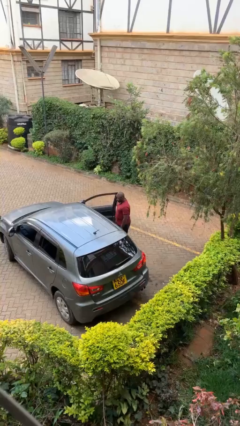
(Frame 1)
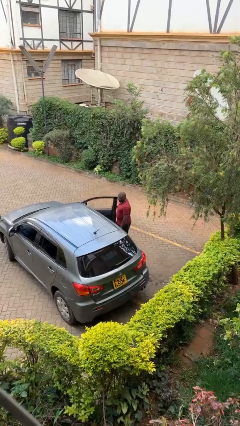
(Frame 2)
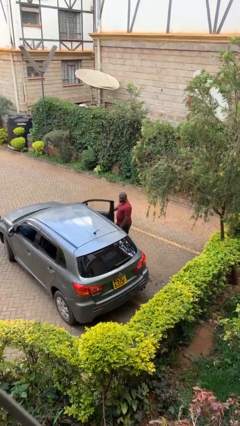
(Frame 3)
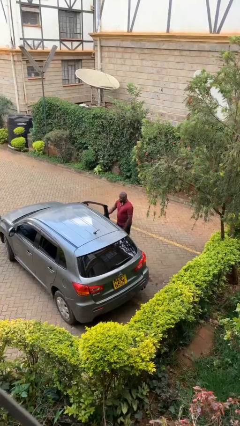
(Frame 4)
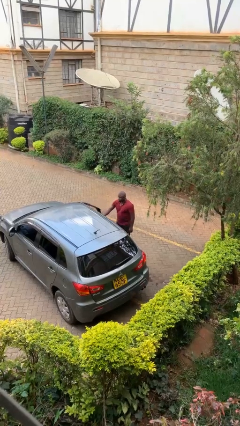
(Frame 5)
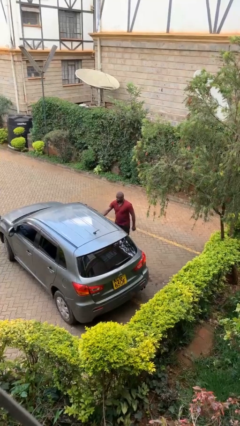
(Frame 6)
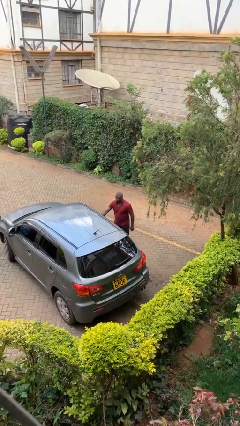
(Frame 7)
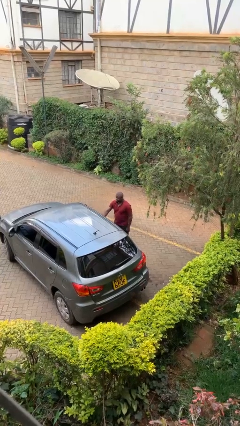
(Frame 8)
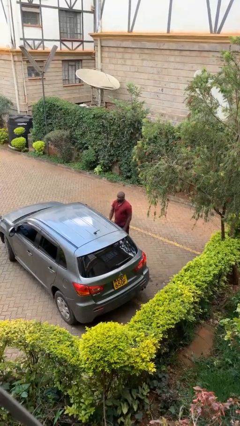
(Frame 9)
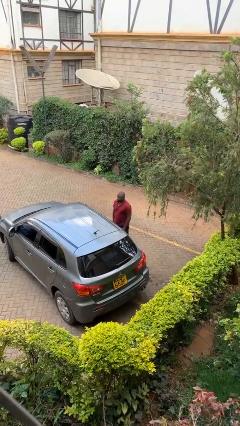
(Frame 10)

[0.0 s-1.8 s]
person closes car door

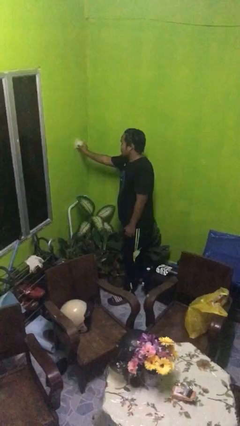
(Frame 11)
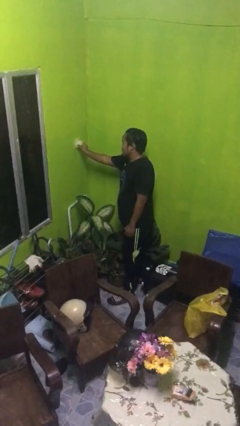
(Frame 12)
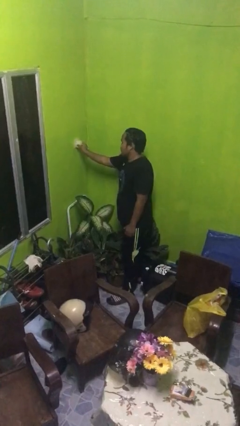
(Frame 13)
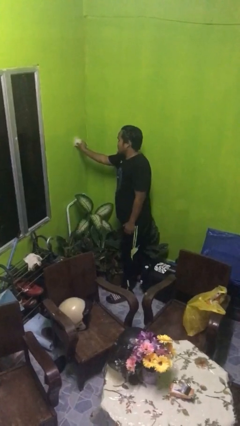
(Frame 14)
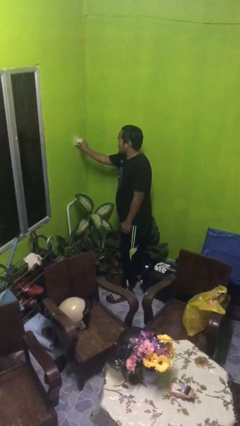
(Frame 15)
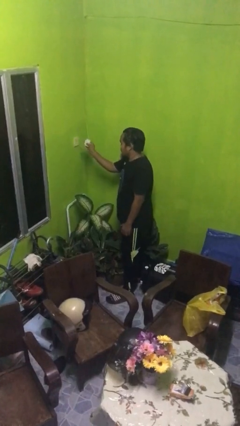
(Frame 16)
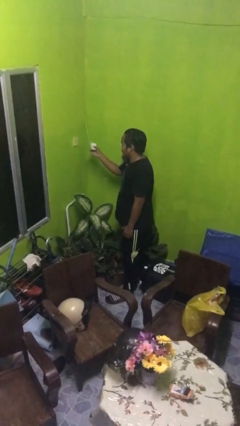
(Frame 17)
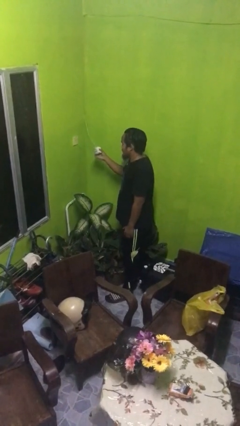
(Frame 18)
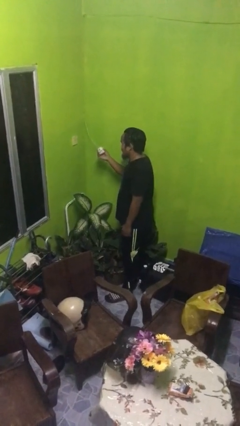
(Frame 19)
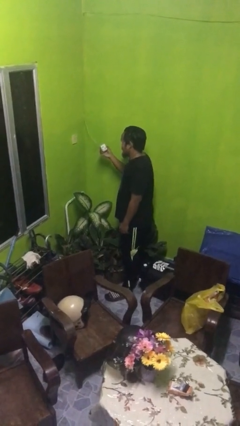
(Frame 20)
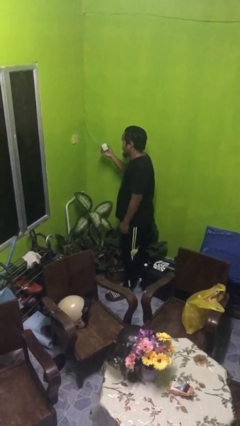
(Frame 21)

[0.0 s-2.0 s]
person unplugs from electrical socket

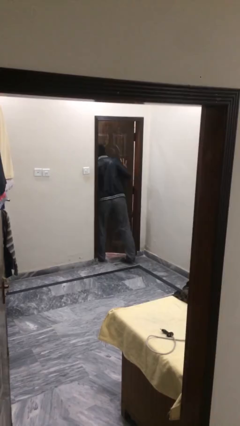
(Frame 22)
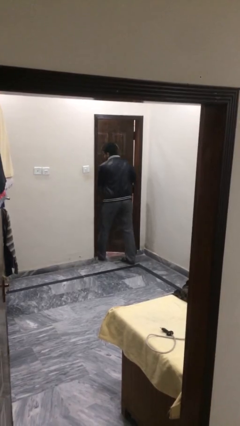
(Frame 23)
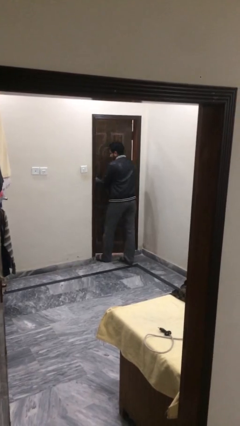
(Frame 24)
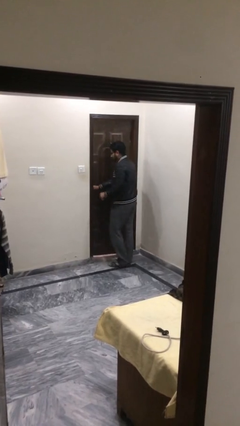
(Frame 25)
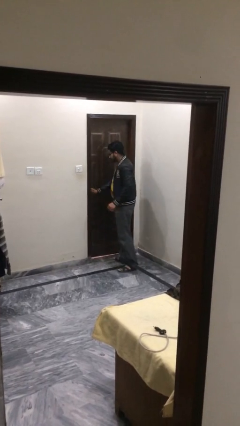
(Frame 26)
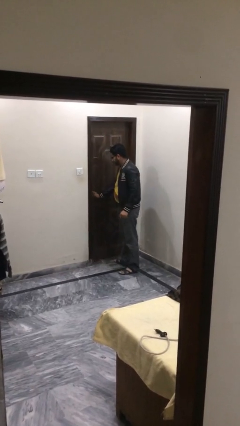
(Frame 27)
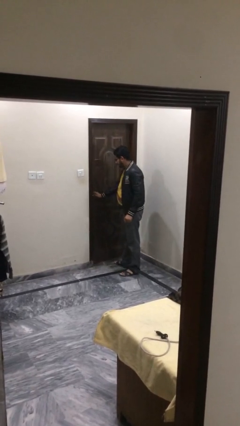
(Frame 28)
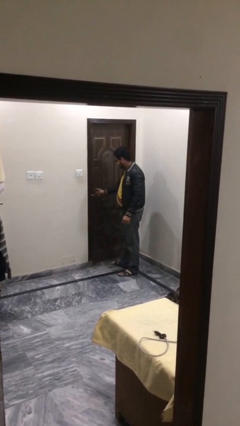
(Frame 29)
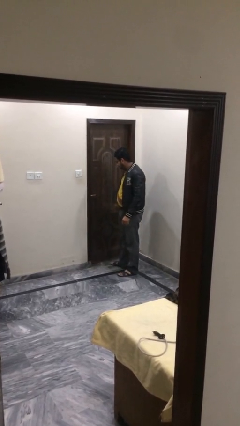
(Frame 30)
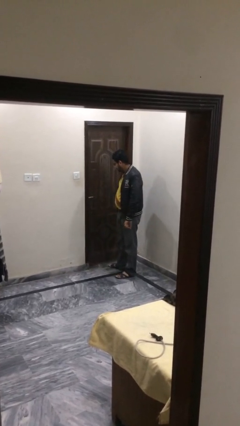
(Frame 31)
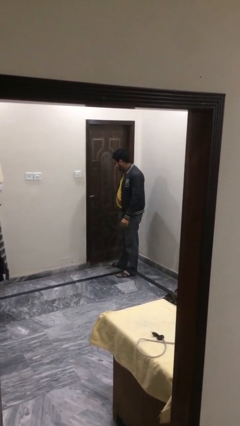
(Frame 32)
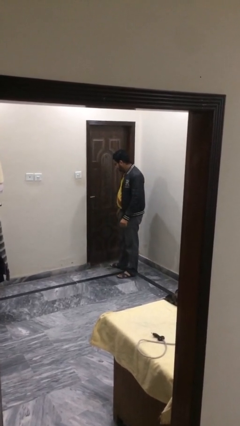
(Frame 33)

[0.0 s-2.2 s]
person closes facility door

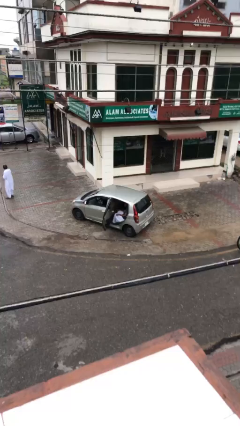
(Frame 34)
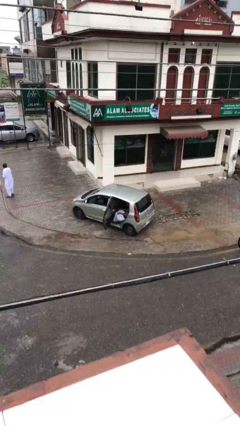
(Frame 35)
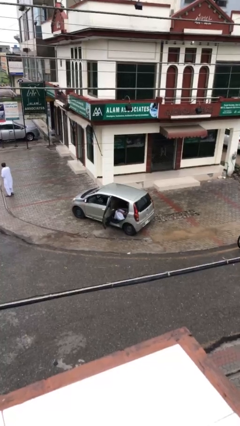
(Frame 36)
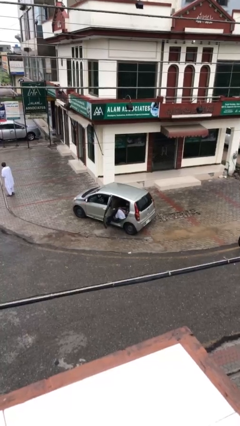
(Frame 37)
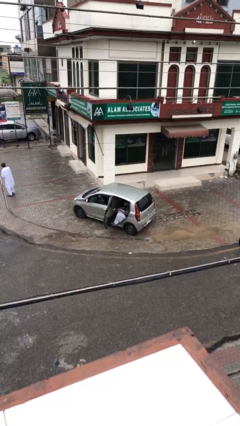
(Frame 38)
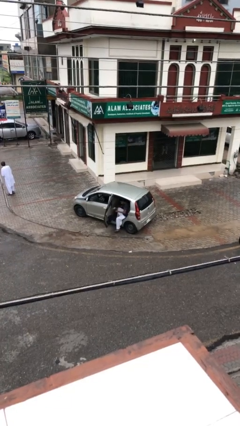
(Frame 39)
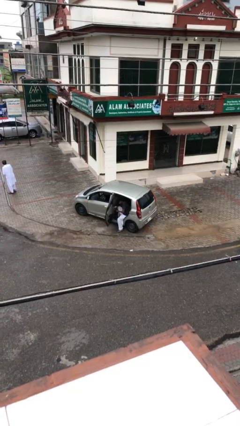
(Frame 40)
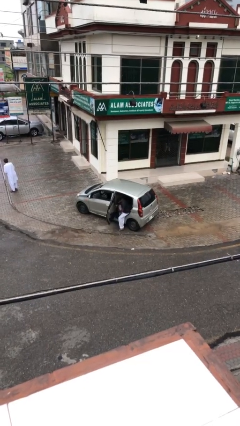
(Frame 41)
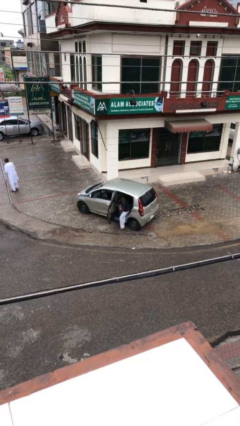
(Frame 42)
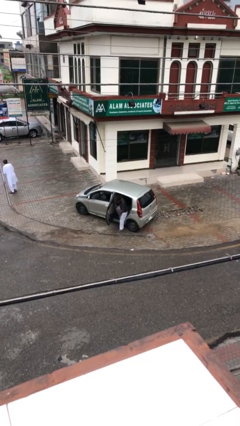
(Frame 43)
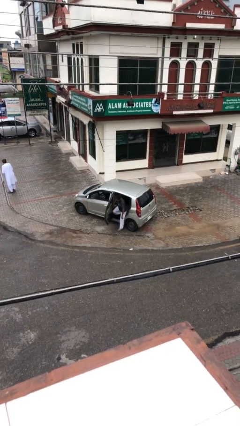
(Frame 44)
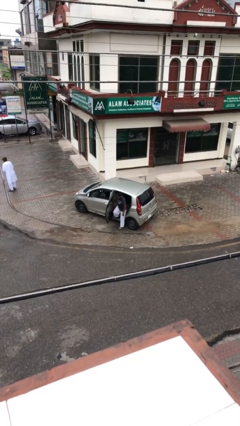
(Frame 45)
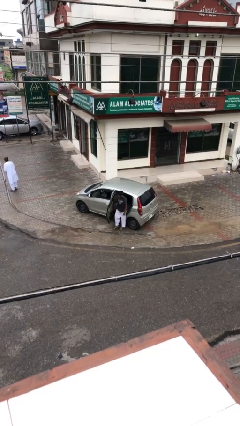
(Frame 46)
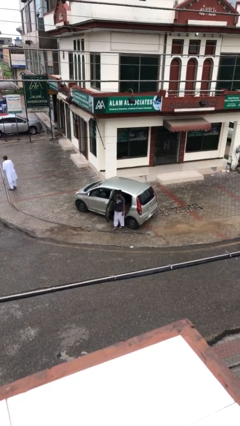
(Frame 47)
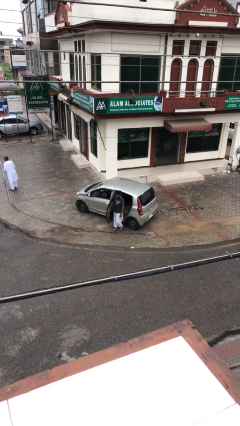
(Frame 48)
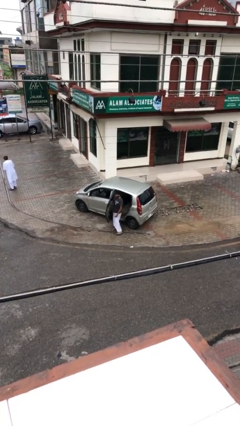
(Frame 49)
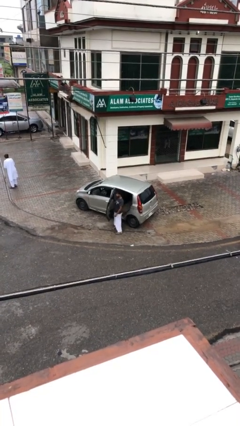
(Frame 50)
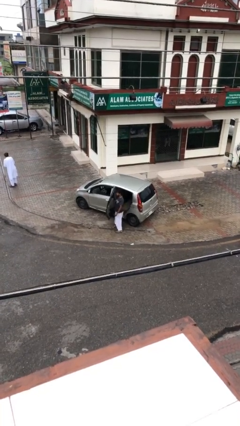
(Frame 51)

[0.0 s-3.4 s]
person exits car

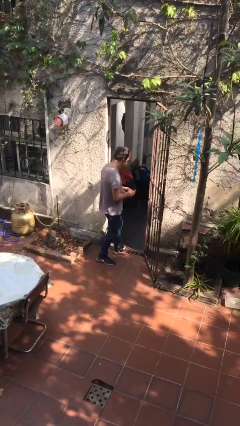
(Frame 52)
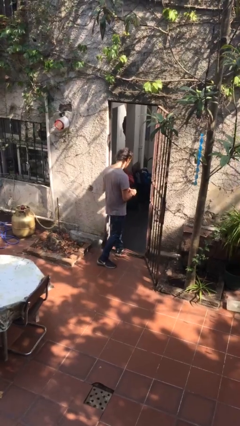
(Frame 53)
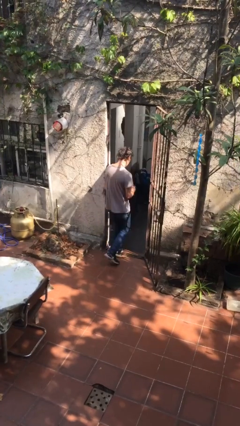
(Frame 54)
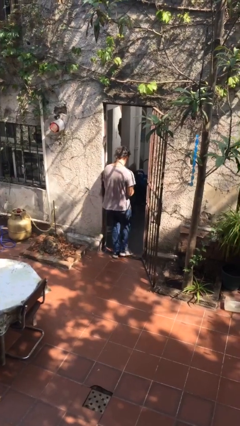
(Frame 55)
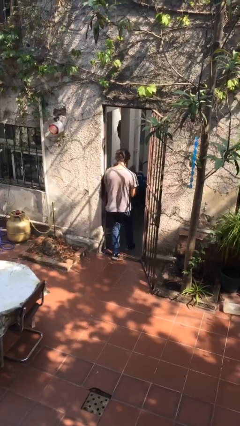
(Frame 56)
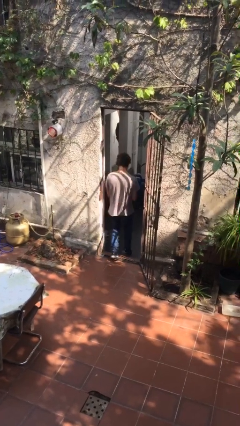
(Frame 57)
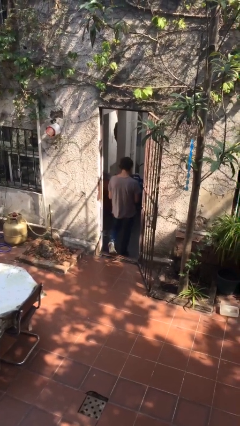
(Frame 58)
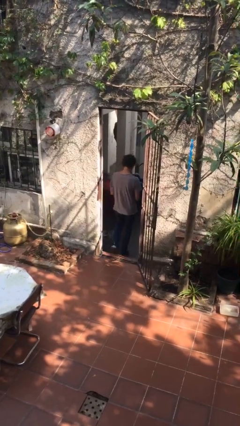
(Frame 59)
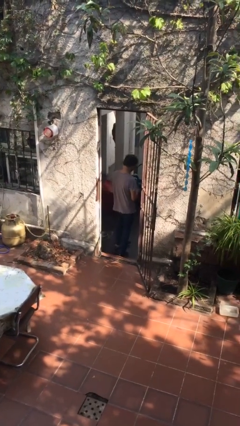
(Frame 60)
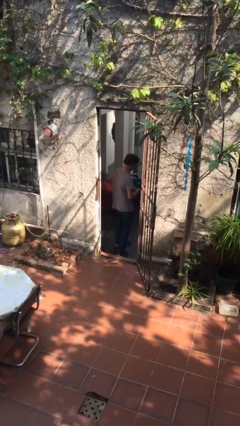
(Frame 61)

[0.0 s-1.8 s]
person exits scene through structure

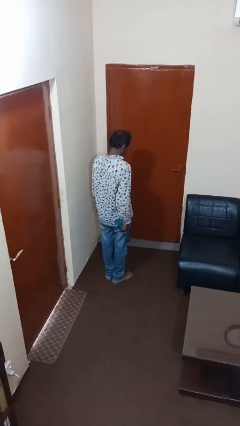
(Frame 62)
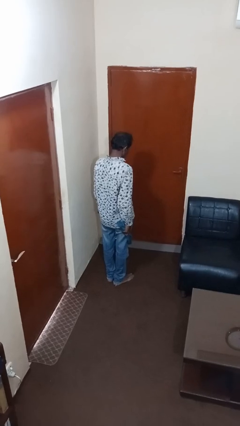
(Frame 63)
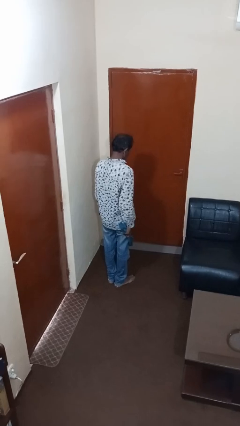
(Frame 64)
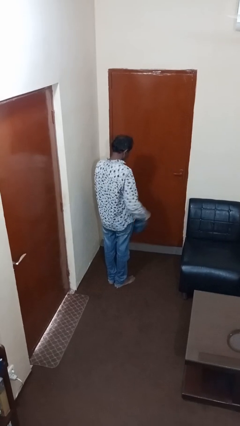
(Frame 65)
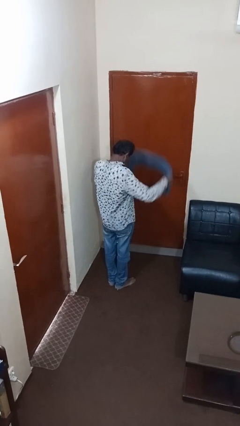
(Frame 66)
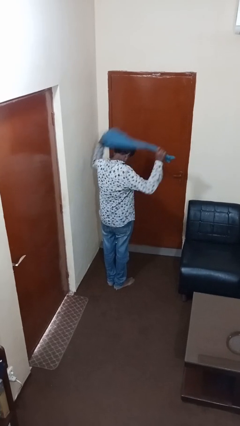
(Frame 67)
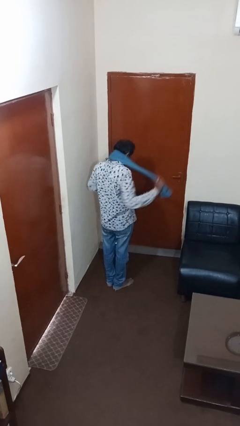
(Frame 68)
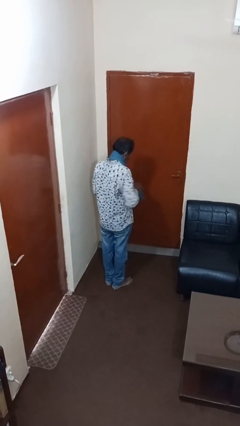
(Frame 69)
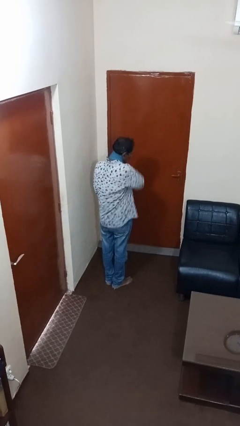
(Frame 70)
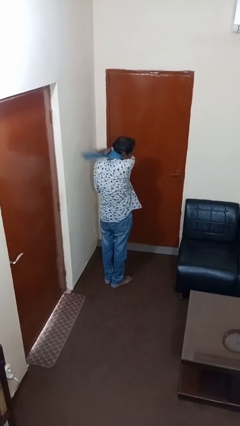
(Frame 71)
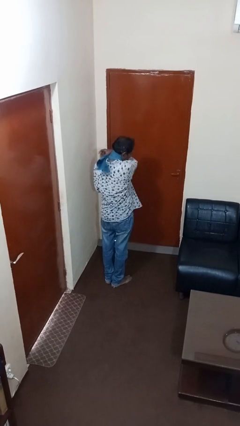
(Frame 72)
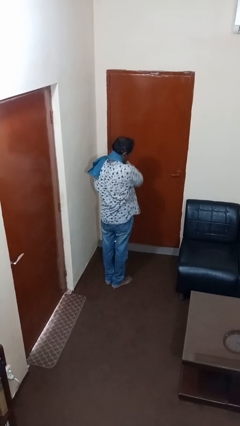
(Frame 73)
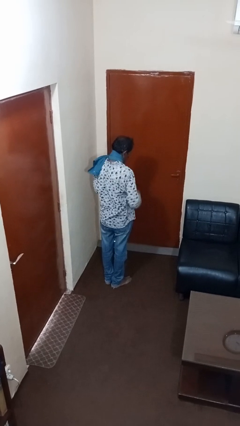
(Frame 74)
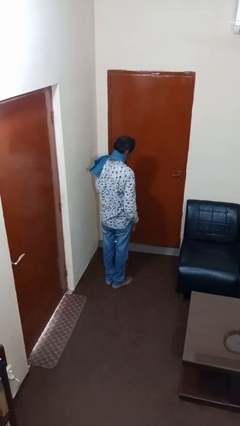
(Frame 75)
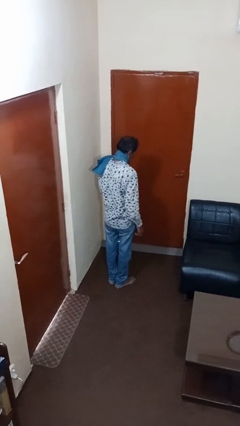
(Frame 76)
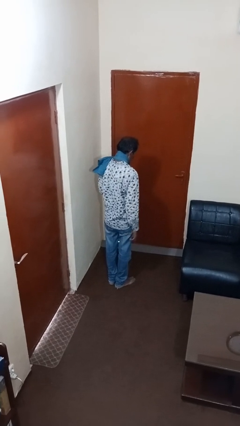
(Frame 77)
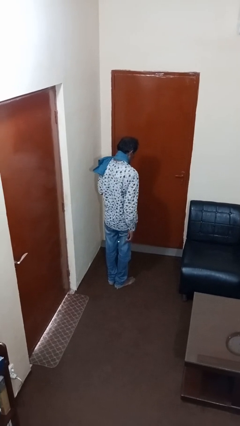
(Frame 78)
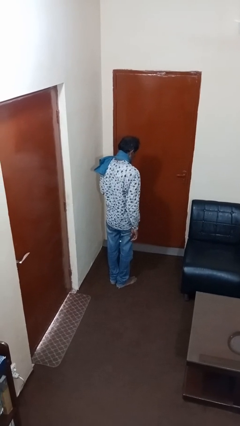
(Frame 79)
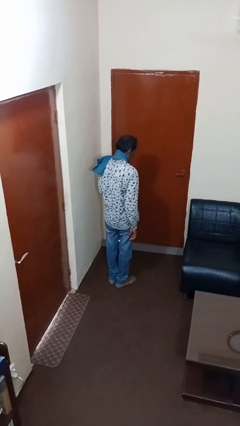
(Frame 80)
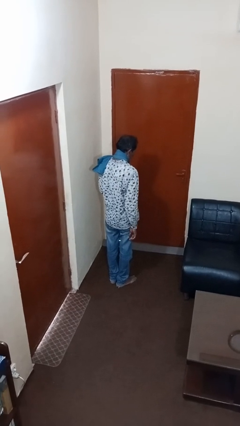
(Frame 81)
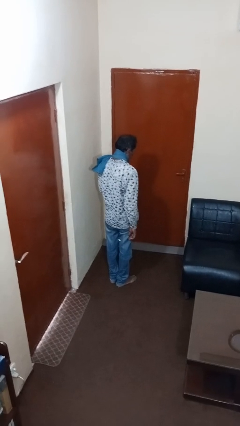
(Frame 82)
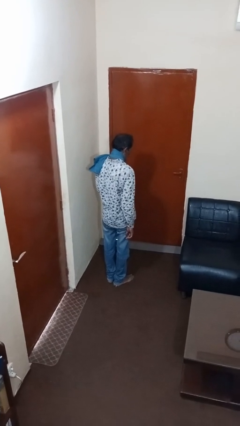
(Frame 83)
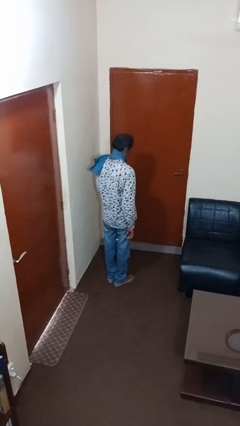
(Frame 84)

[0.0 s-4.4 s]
person puts on scarf

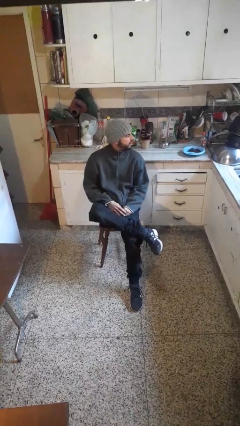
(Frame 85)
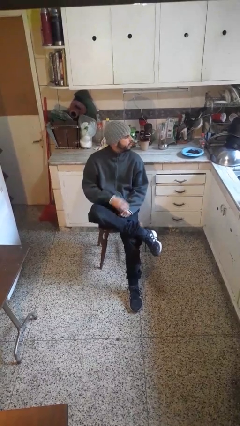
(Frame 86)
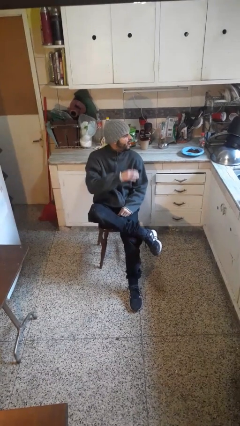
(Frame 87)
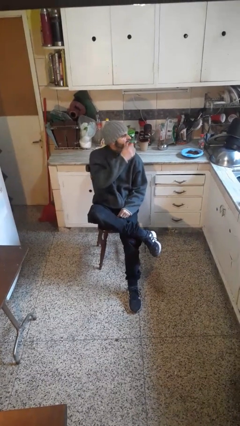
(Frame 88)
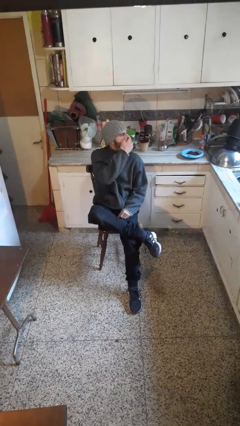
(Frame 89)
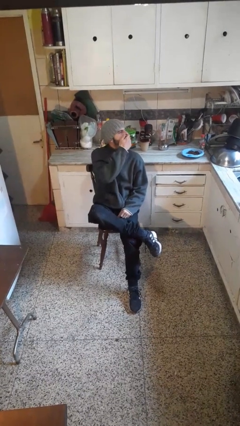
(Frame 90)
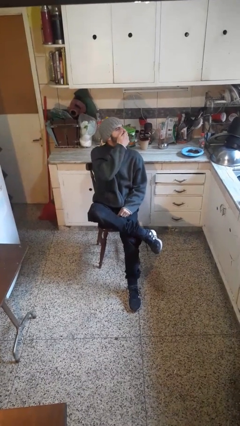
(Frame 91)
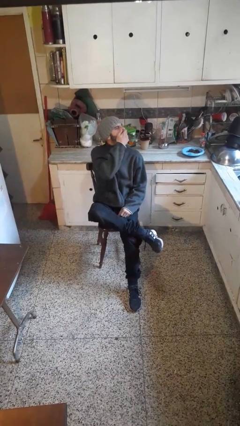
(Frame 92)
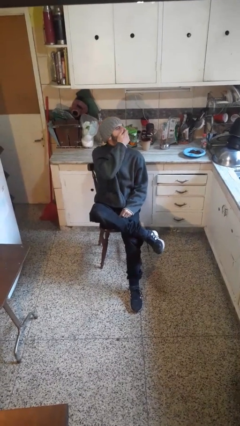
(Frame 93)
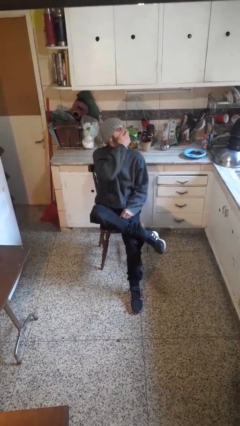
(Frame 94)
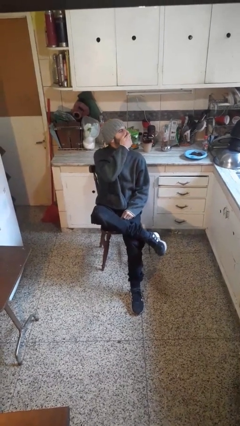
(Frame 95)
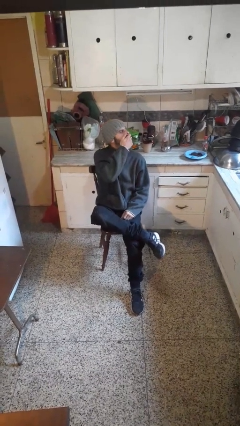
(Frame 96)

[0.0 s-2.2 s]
person yawns
